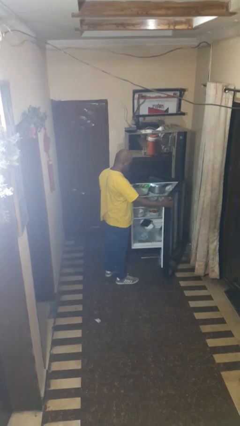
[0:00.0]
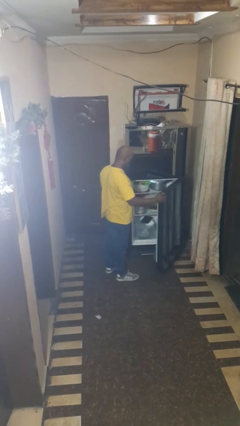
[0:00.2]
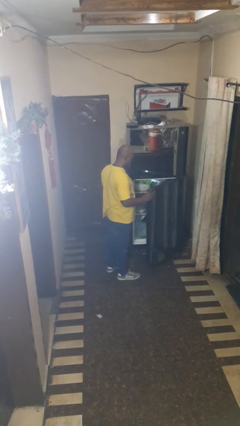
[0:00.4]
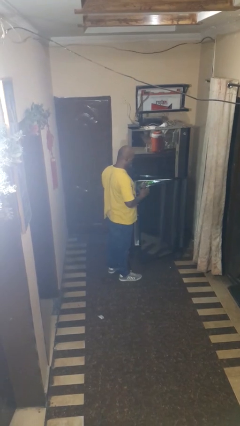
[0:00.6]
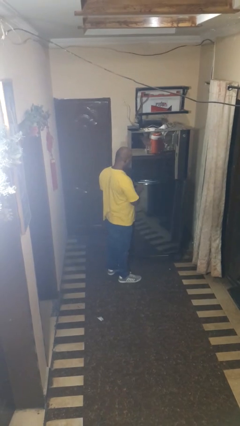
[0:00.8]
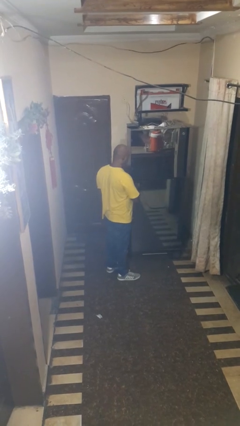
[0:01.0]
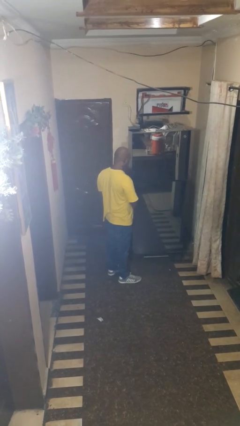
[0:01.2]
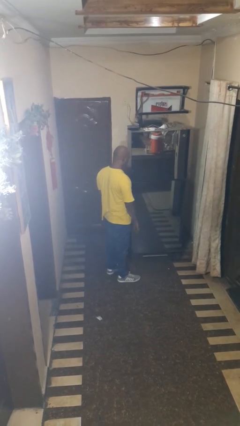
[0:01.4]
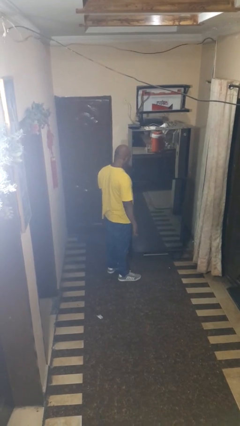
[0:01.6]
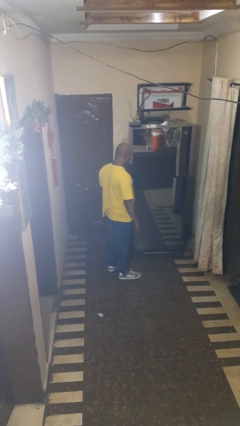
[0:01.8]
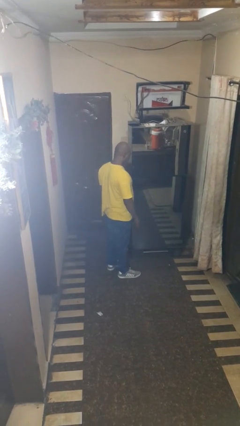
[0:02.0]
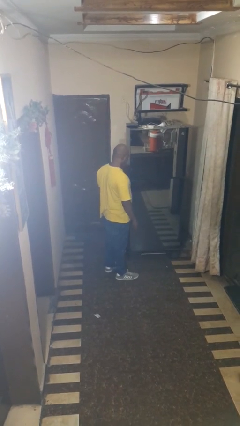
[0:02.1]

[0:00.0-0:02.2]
person closes refrigerator

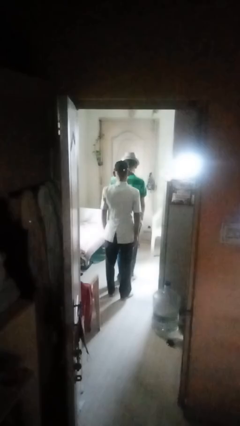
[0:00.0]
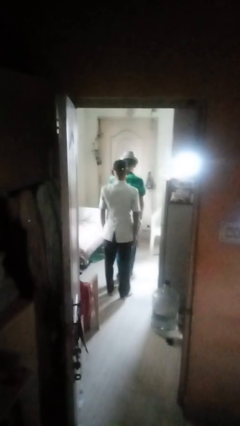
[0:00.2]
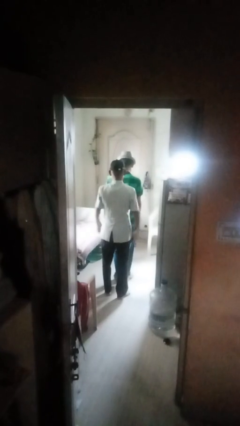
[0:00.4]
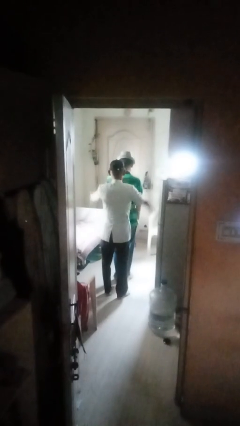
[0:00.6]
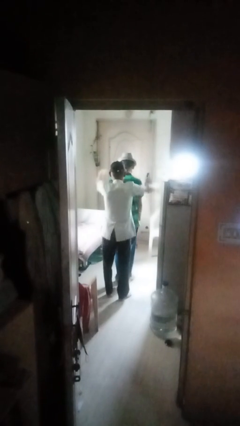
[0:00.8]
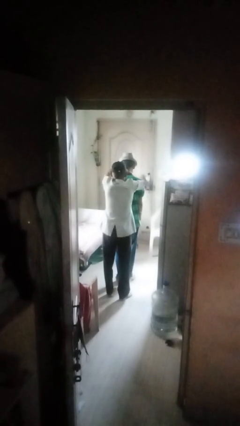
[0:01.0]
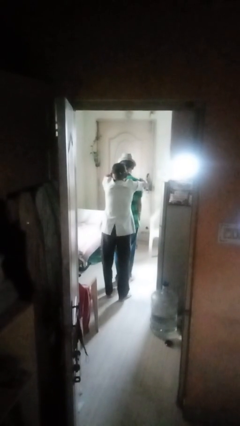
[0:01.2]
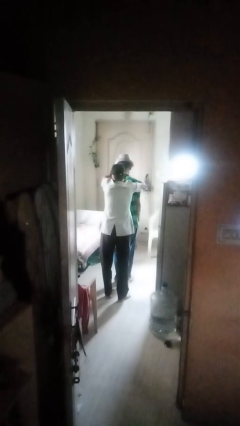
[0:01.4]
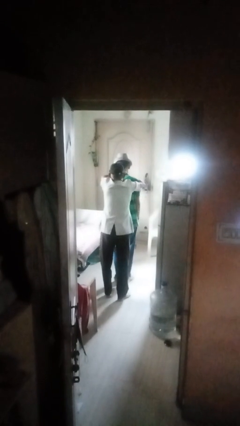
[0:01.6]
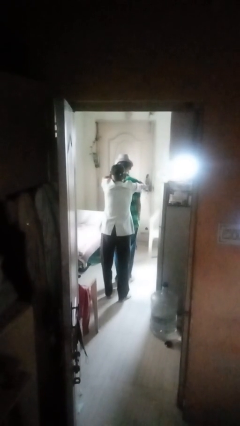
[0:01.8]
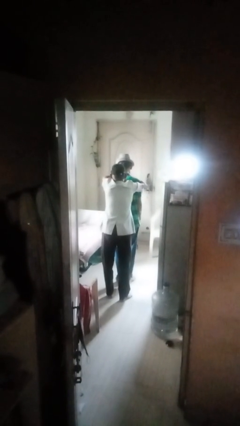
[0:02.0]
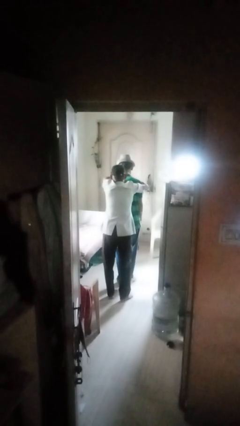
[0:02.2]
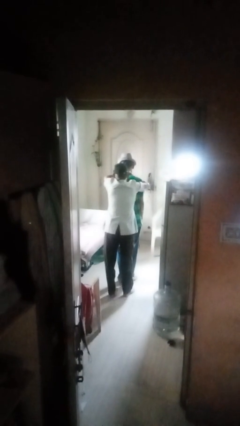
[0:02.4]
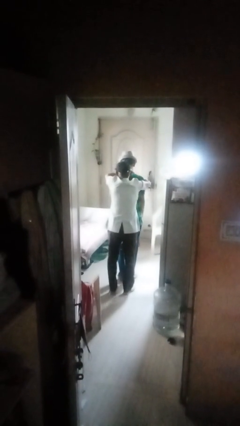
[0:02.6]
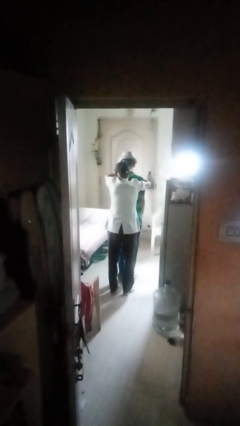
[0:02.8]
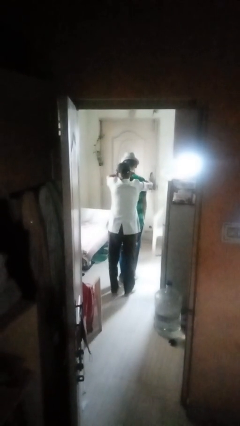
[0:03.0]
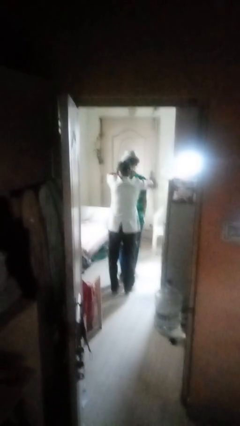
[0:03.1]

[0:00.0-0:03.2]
person hugs person from behind

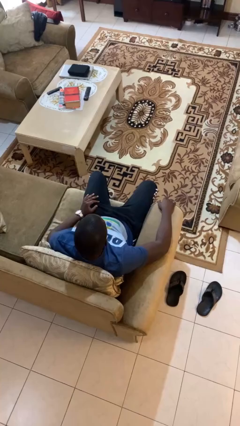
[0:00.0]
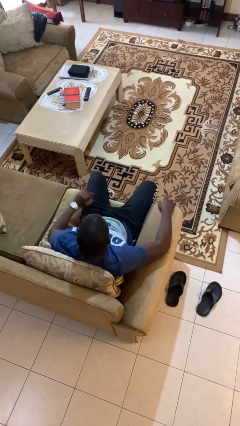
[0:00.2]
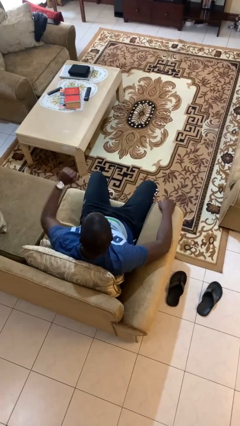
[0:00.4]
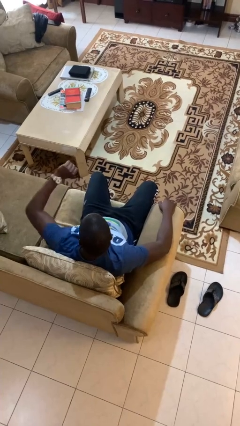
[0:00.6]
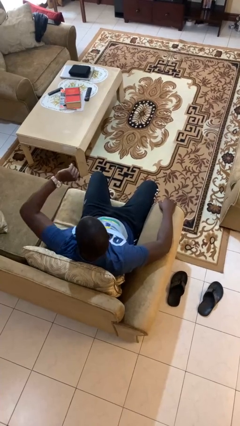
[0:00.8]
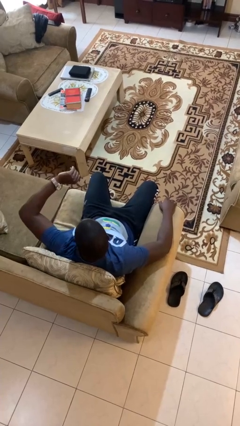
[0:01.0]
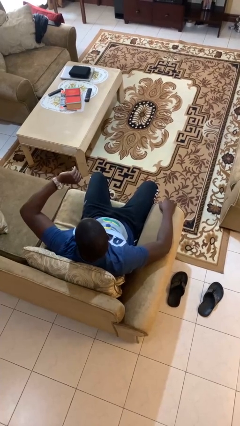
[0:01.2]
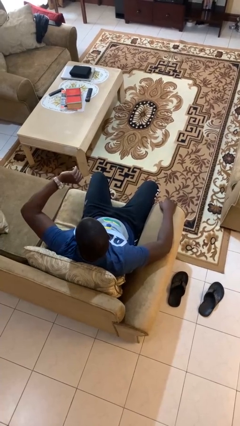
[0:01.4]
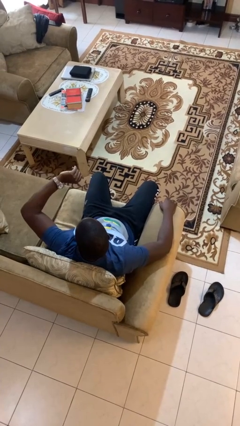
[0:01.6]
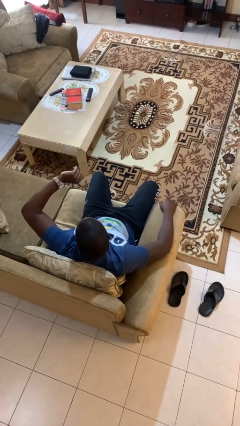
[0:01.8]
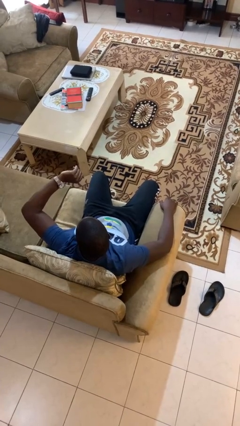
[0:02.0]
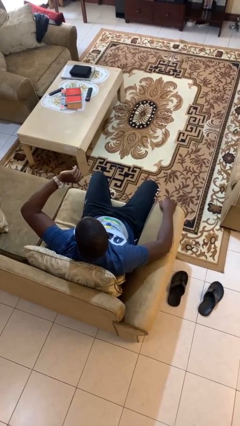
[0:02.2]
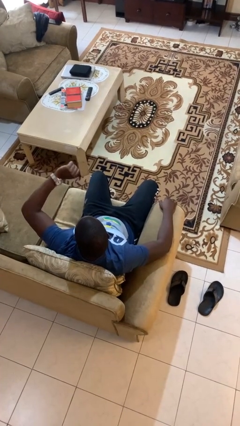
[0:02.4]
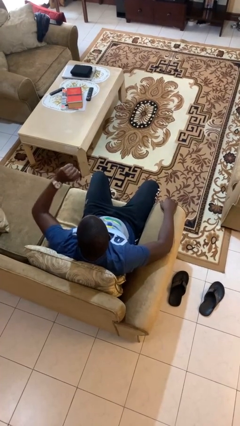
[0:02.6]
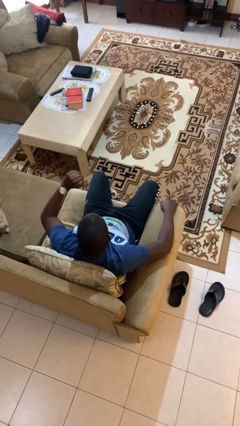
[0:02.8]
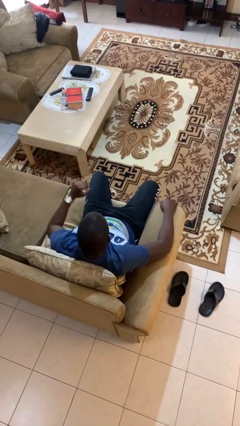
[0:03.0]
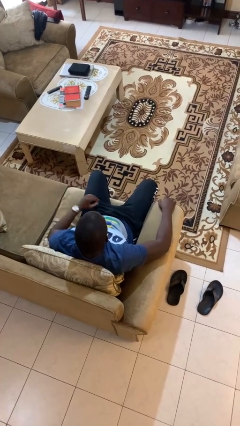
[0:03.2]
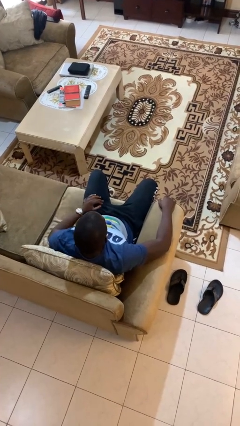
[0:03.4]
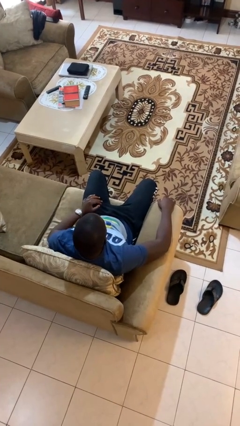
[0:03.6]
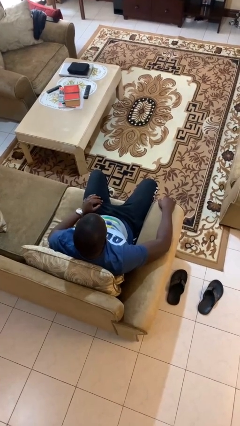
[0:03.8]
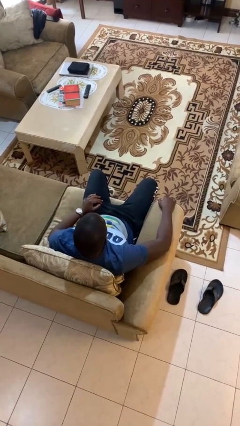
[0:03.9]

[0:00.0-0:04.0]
person looks at wristwatch

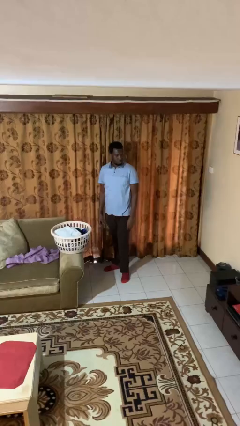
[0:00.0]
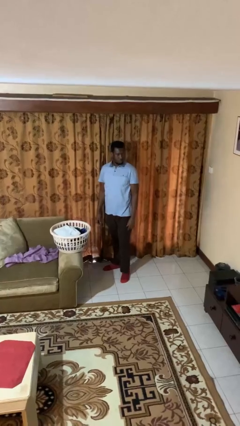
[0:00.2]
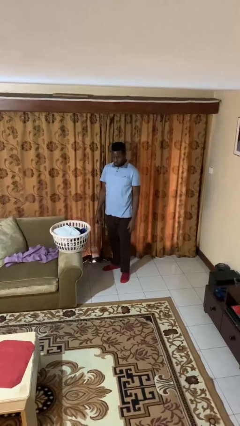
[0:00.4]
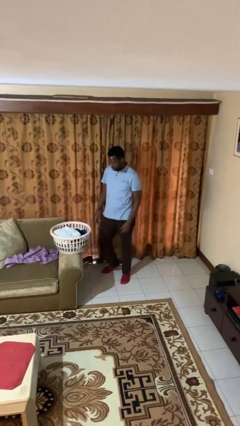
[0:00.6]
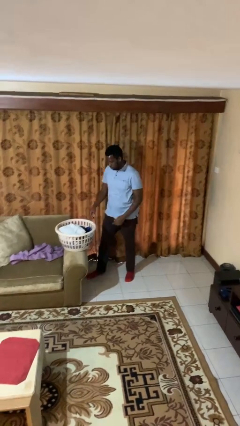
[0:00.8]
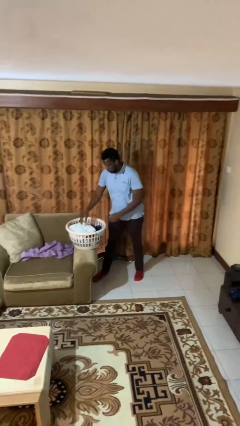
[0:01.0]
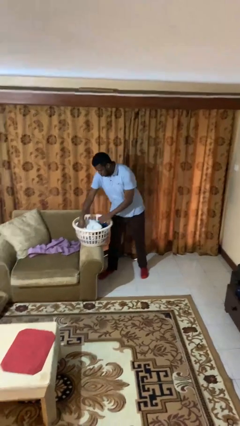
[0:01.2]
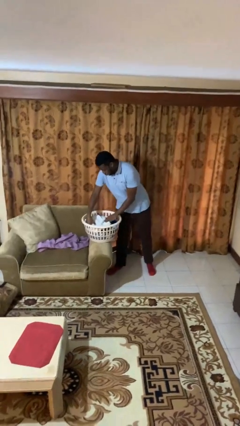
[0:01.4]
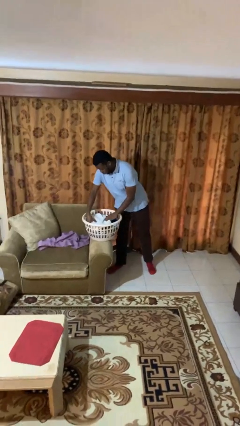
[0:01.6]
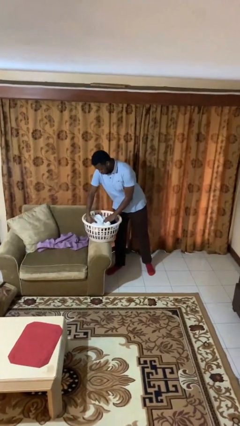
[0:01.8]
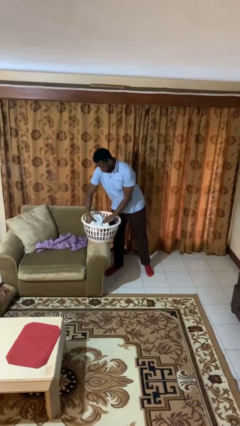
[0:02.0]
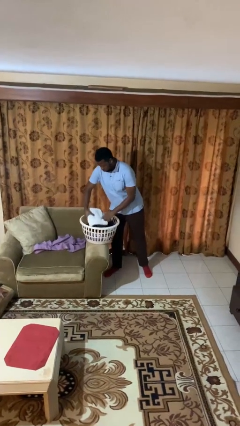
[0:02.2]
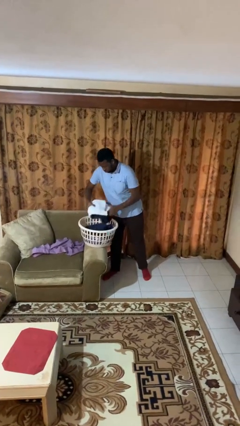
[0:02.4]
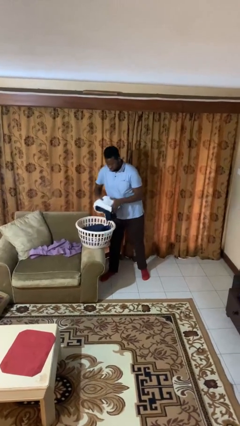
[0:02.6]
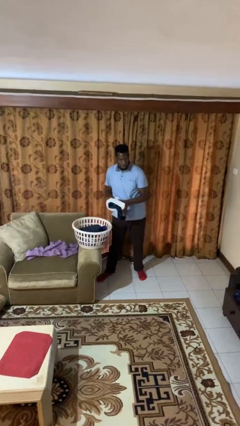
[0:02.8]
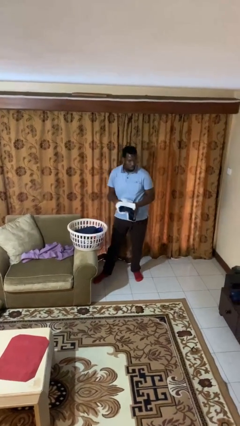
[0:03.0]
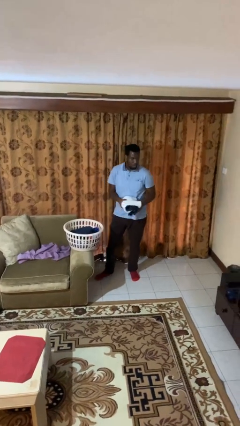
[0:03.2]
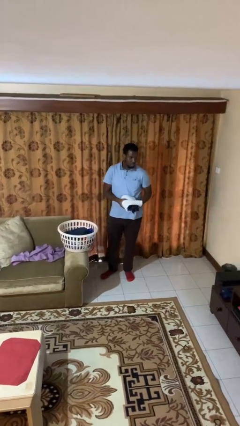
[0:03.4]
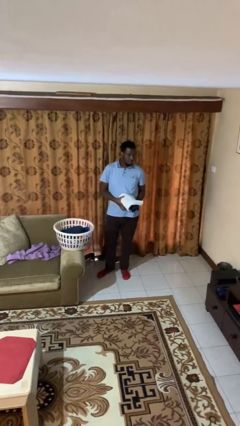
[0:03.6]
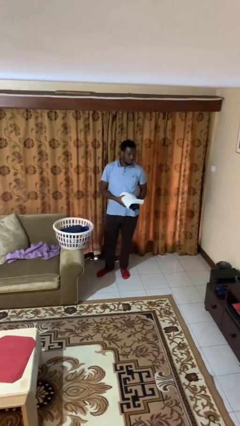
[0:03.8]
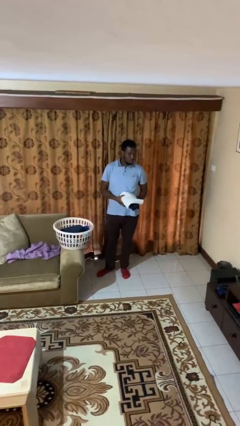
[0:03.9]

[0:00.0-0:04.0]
person takes object from basket

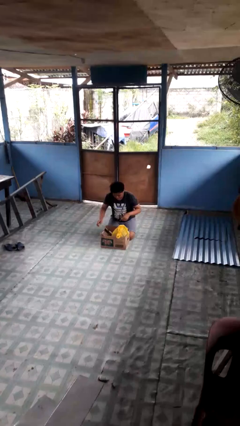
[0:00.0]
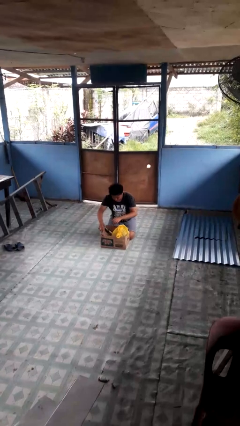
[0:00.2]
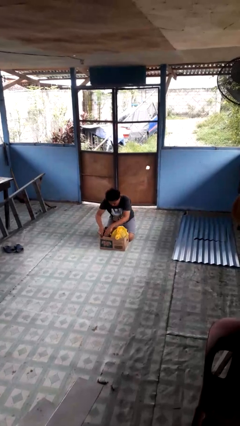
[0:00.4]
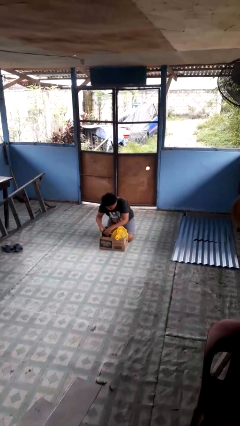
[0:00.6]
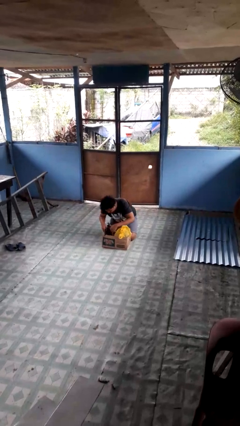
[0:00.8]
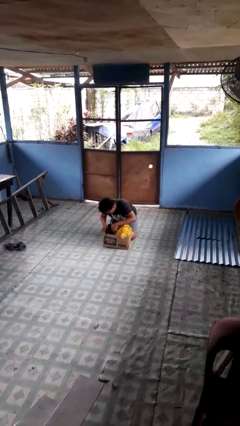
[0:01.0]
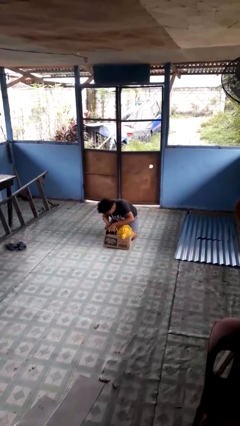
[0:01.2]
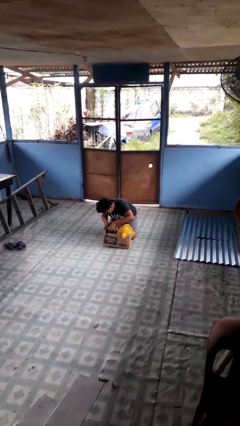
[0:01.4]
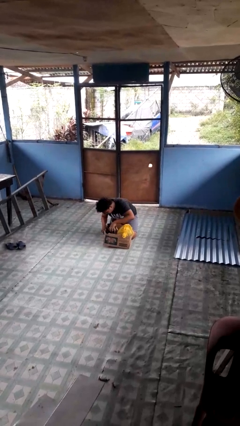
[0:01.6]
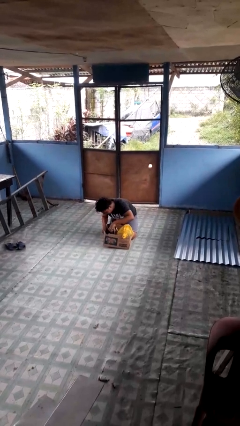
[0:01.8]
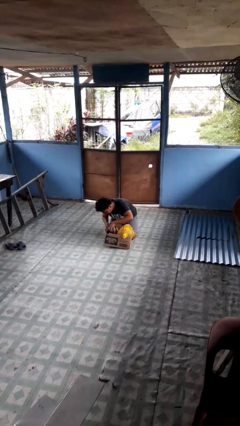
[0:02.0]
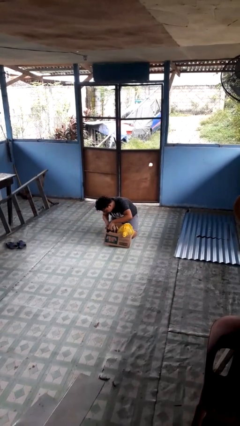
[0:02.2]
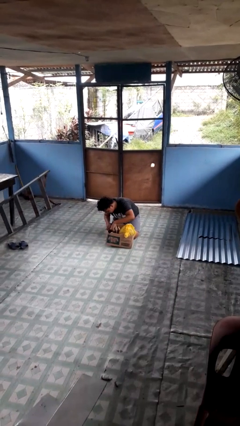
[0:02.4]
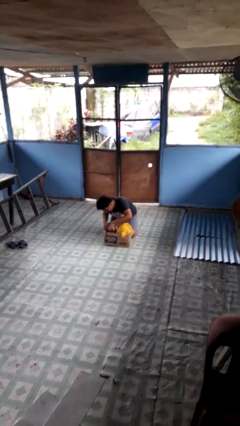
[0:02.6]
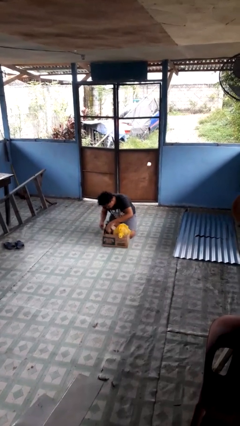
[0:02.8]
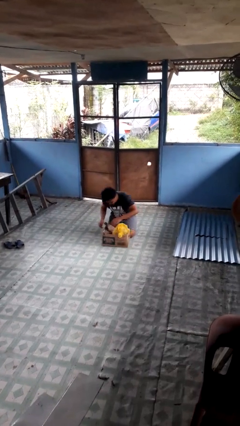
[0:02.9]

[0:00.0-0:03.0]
person searches in box

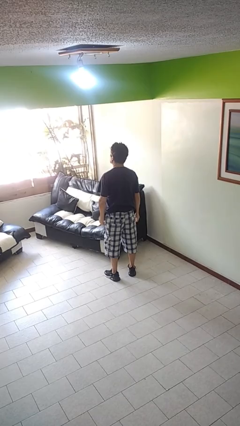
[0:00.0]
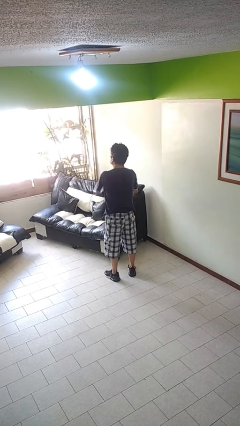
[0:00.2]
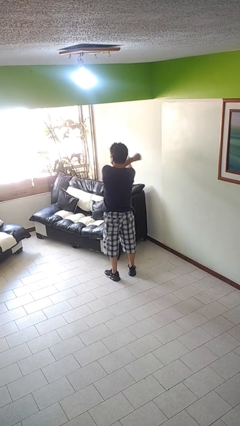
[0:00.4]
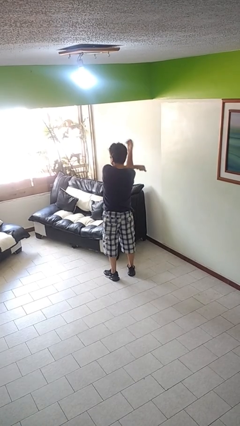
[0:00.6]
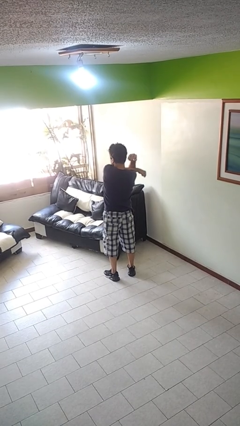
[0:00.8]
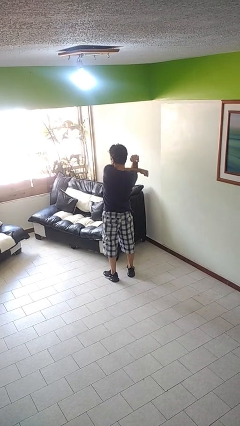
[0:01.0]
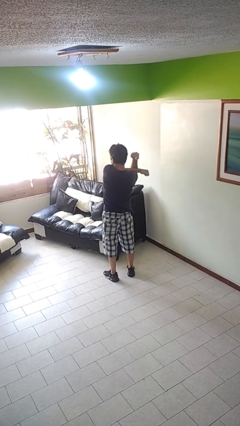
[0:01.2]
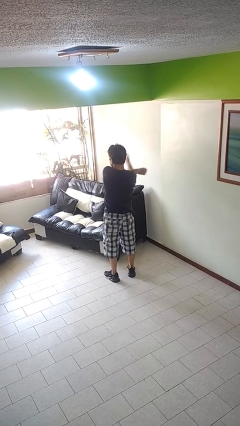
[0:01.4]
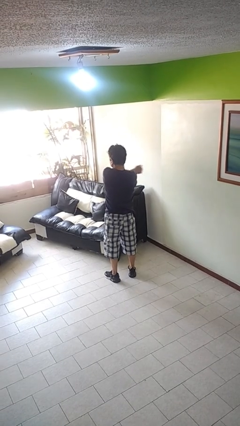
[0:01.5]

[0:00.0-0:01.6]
person stretches arms to side
